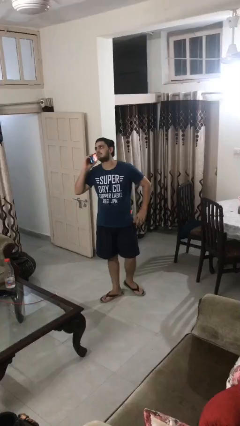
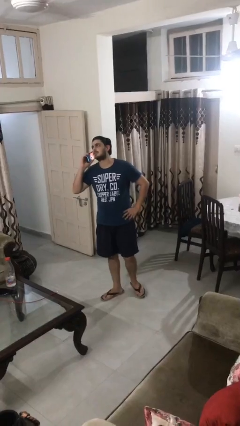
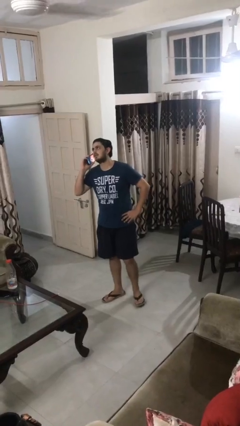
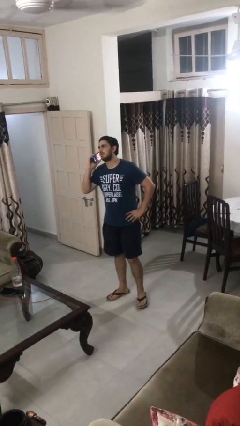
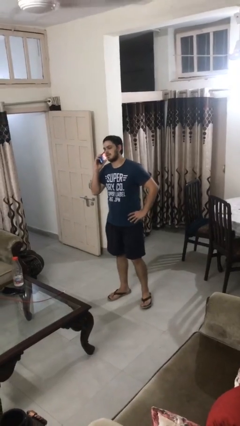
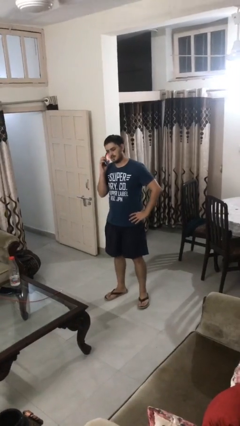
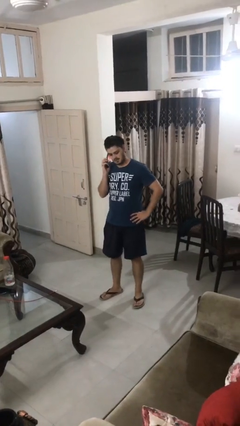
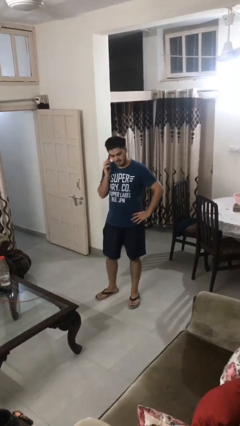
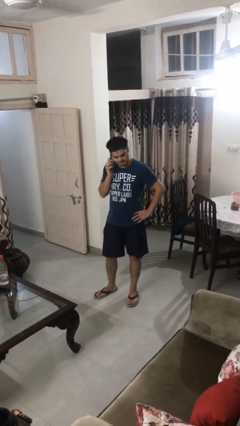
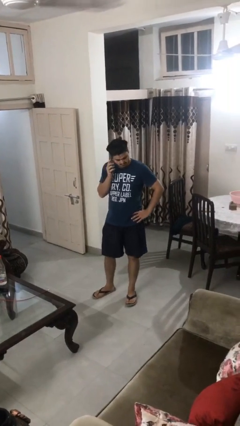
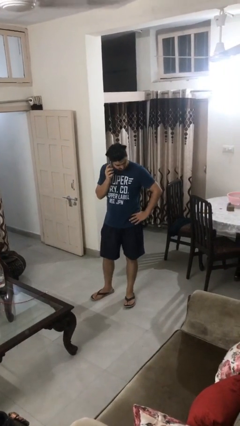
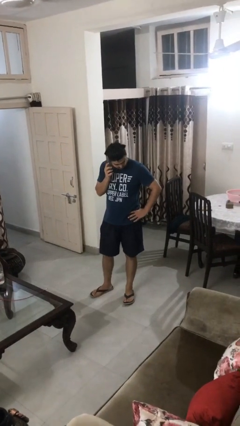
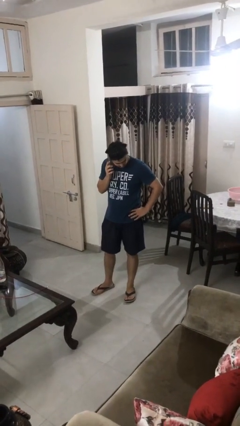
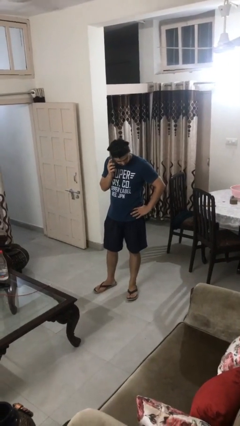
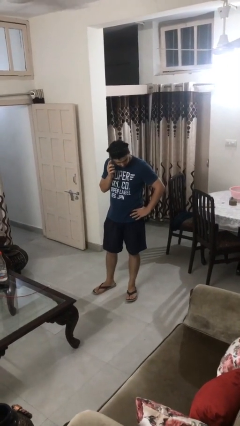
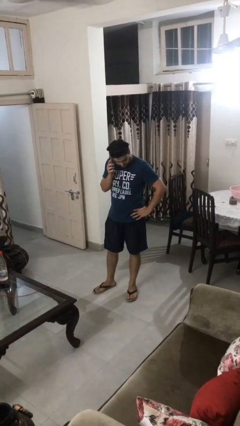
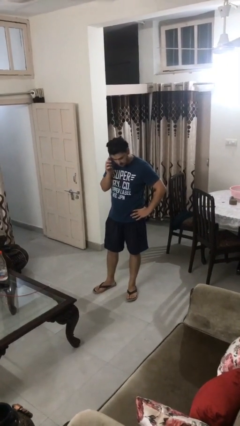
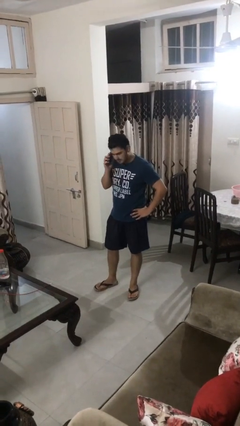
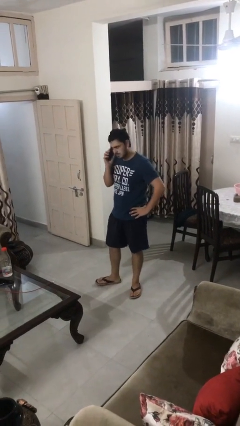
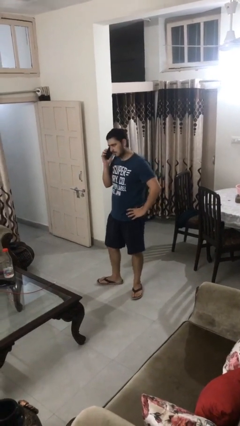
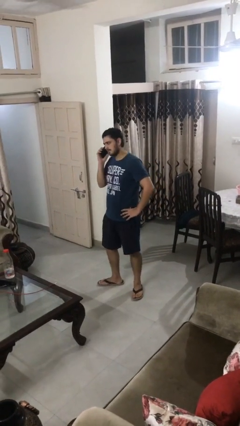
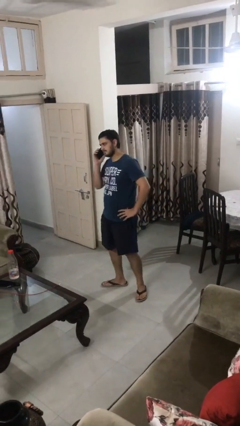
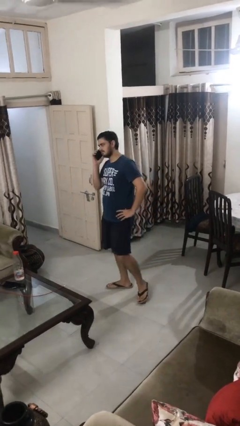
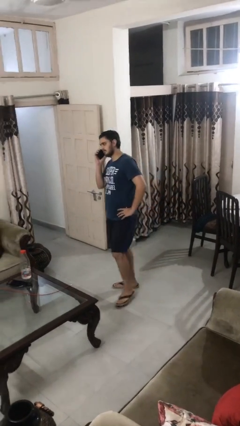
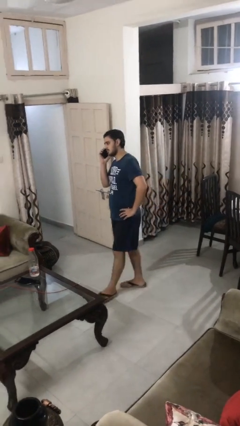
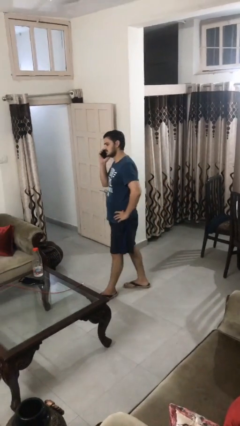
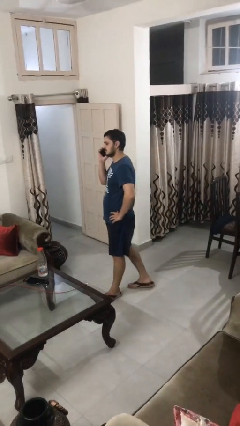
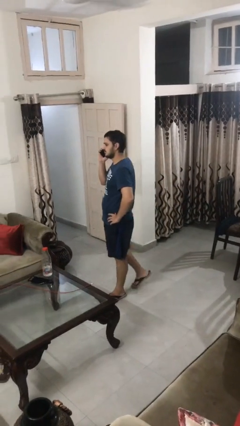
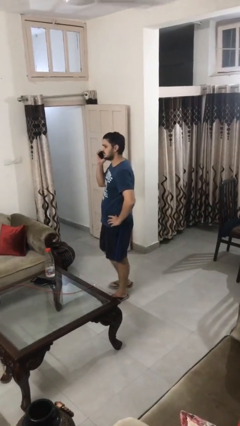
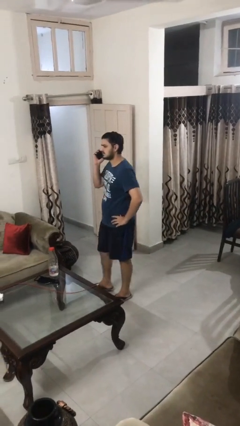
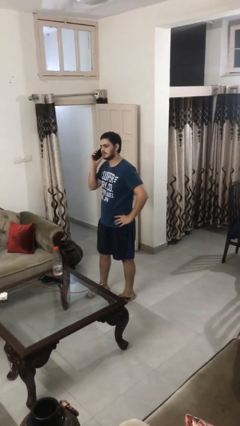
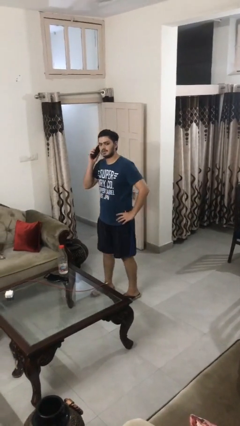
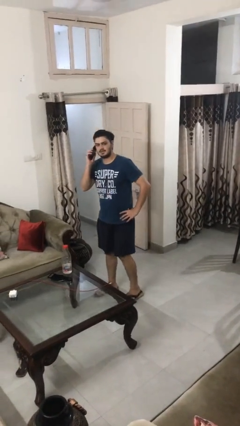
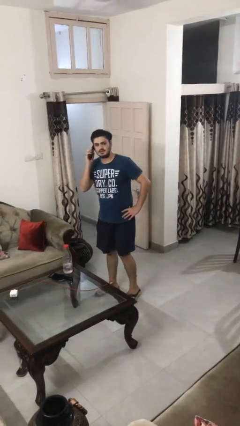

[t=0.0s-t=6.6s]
person talks on phone

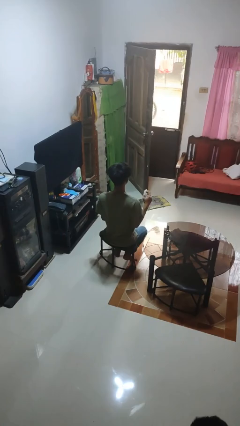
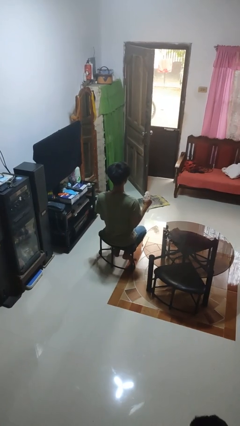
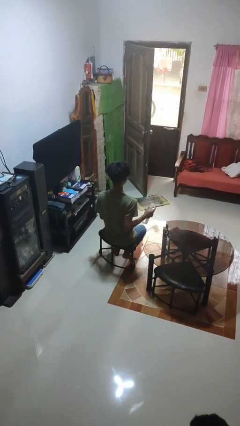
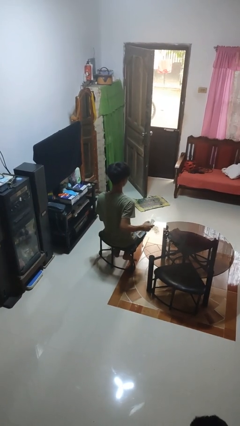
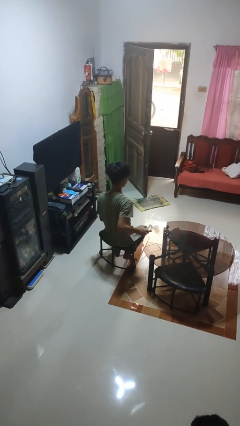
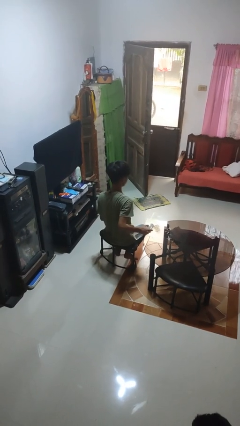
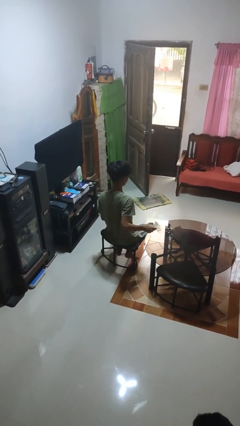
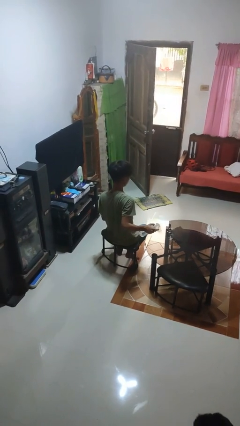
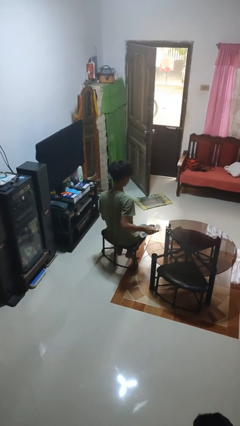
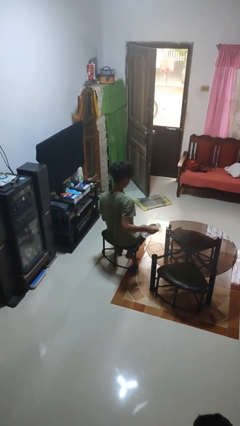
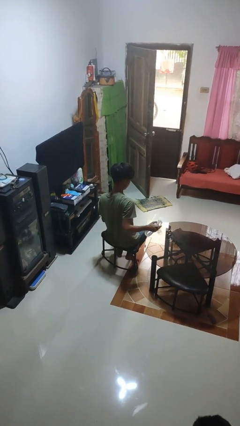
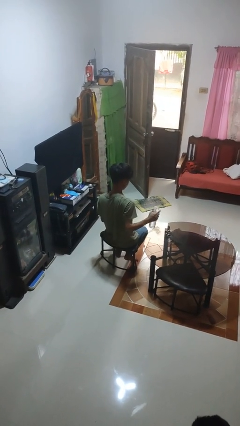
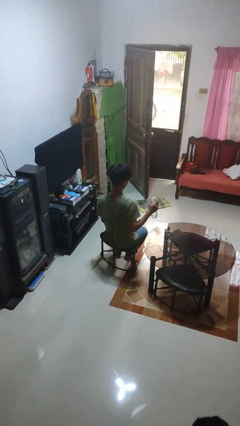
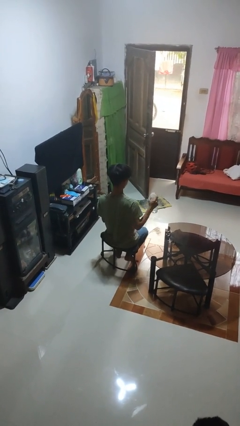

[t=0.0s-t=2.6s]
person sprays from bottle

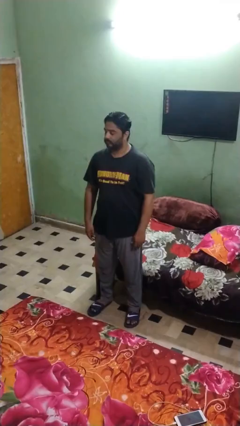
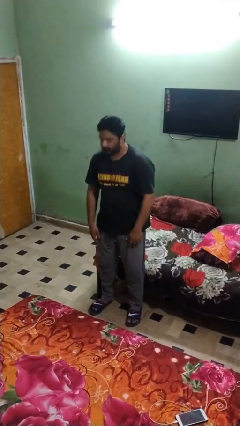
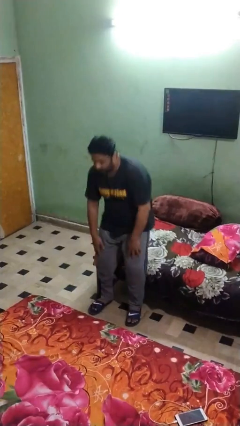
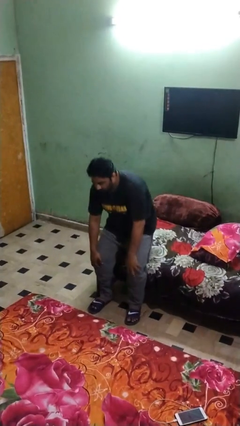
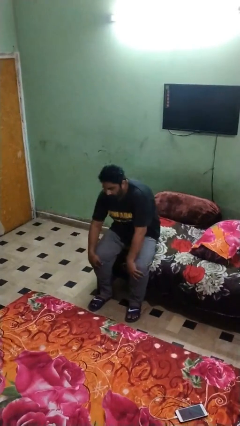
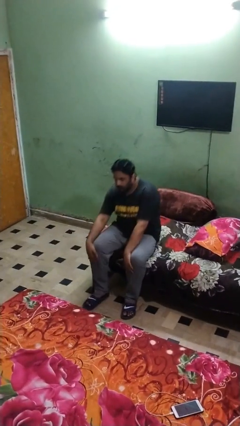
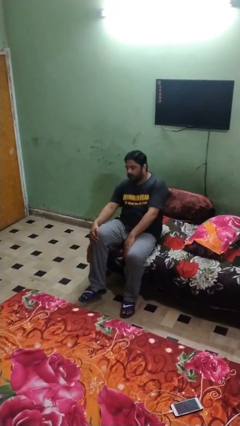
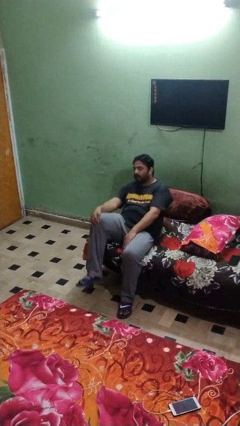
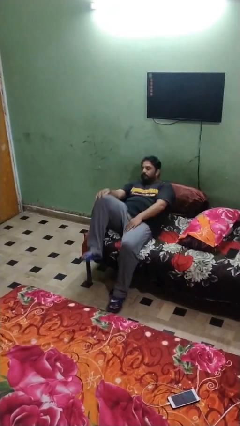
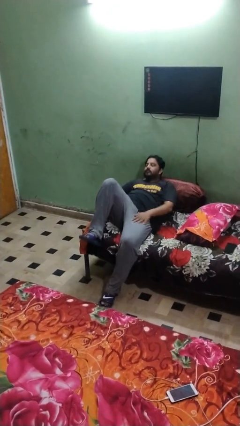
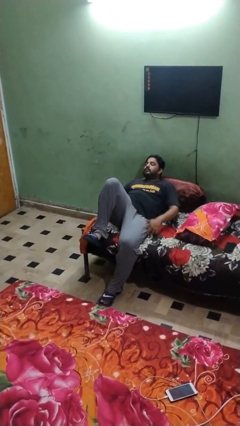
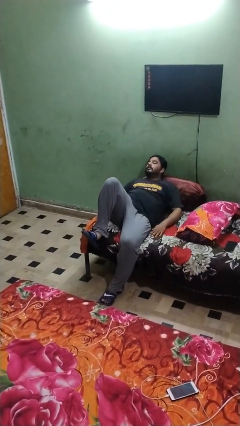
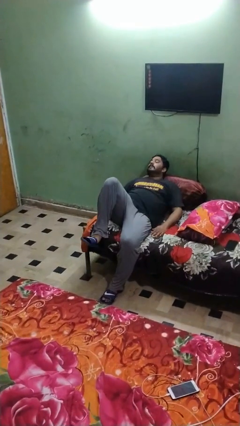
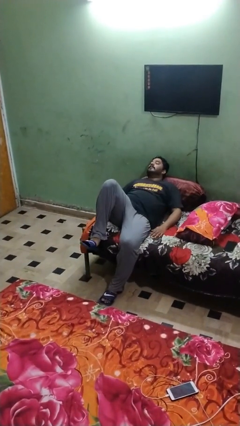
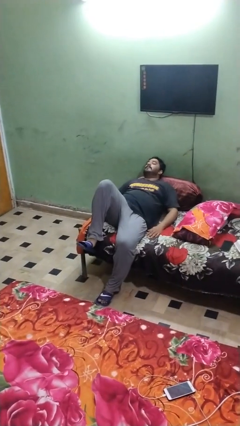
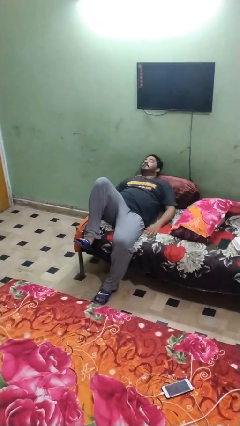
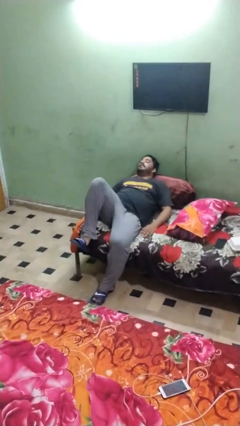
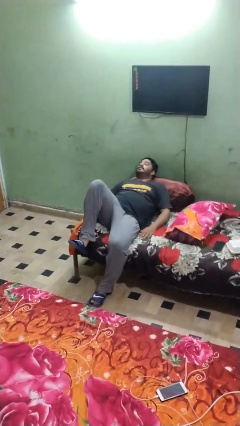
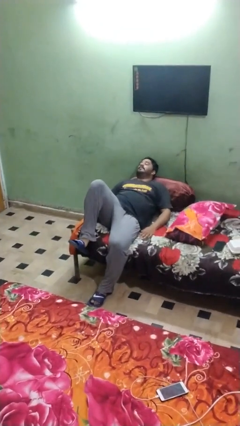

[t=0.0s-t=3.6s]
person lies down on couch

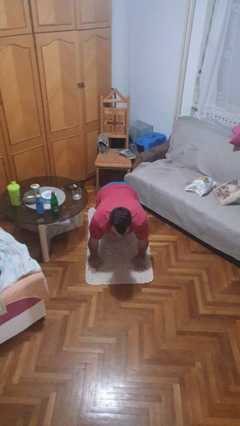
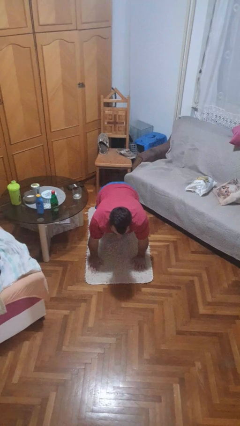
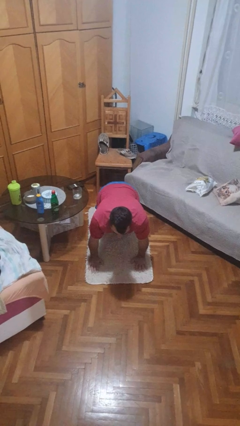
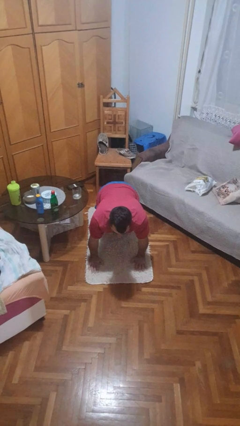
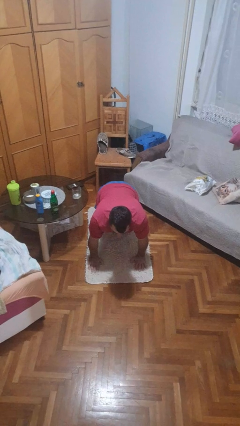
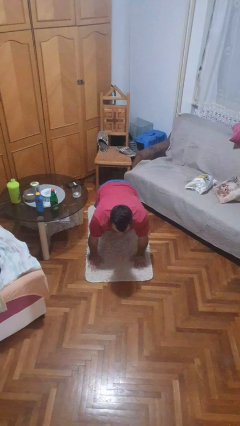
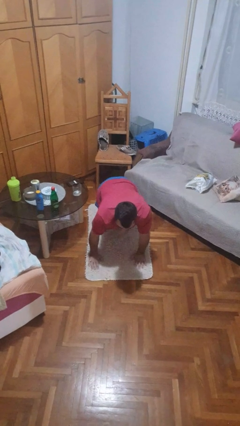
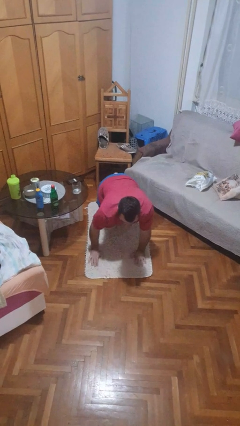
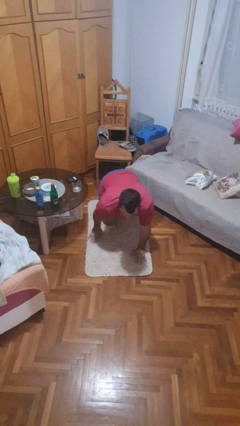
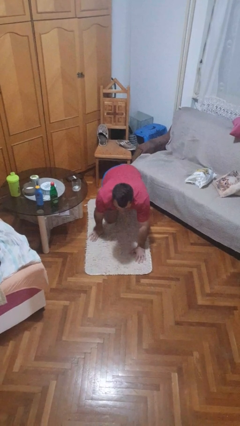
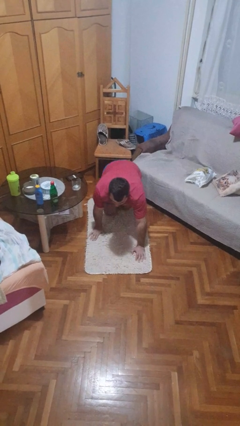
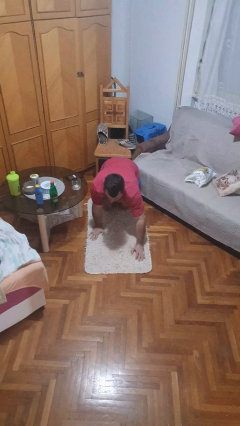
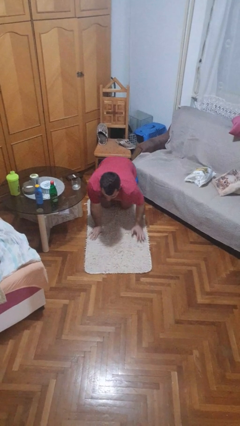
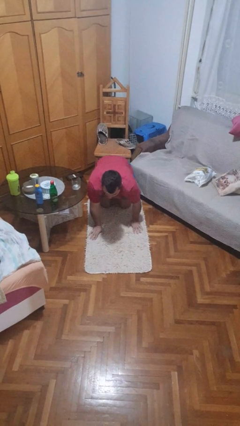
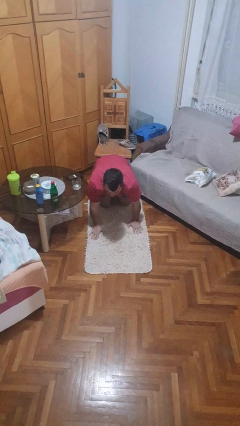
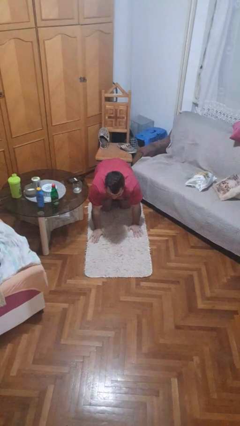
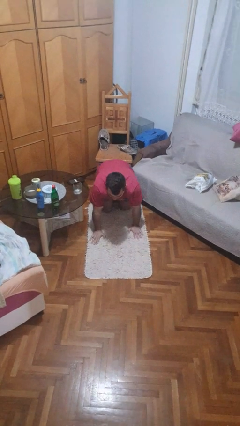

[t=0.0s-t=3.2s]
person crawls

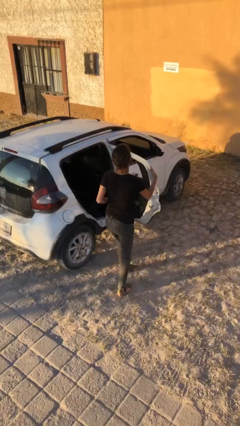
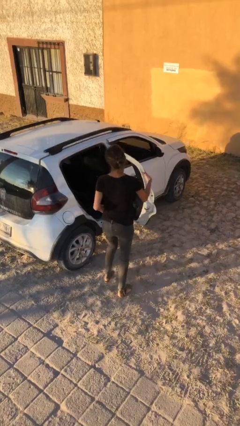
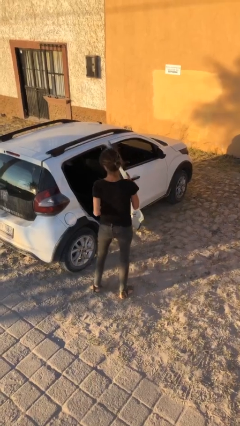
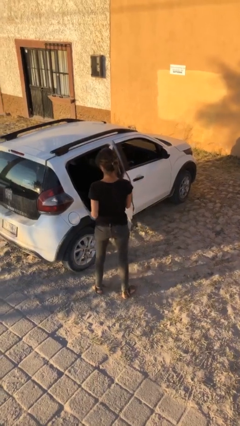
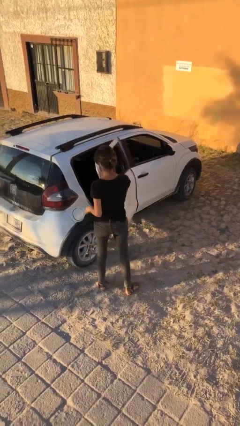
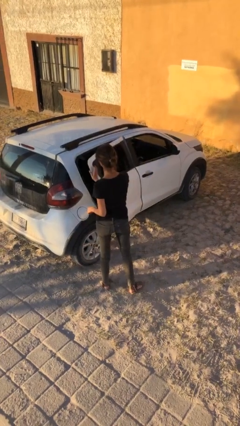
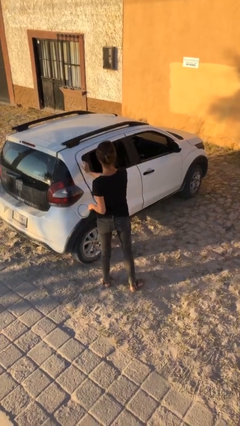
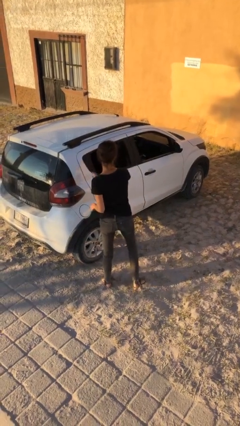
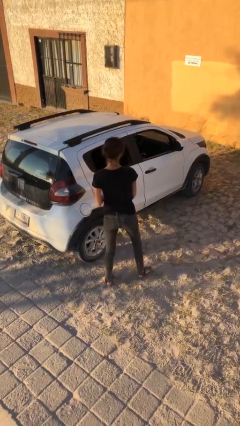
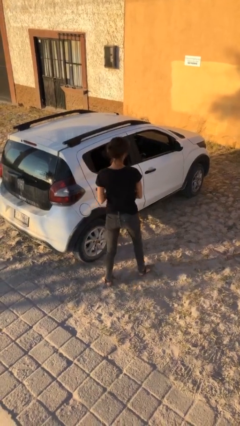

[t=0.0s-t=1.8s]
person closes car door
